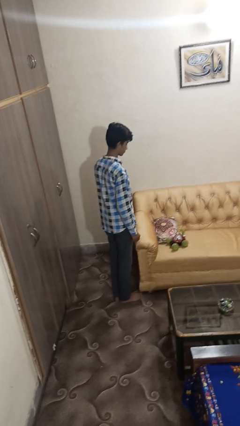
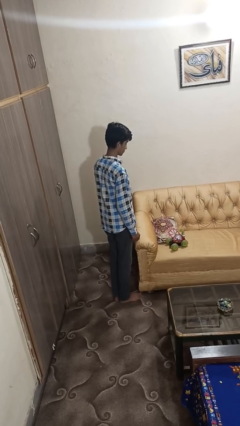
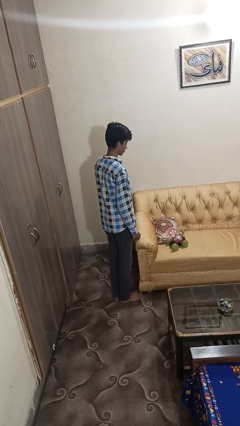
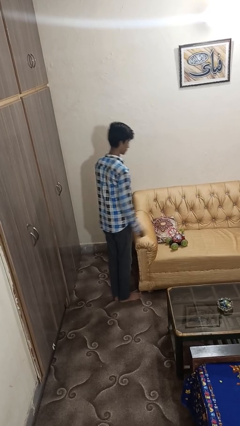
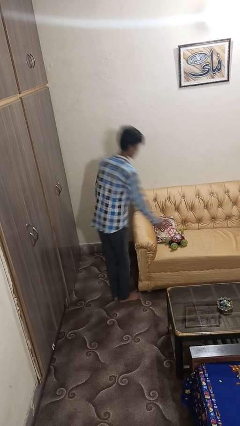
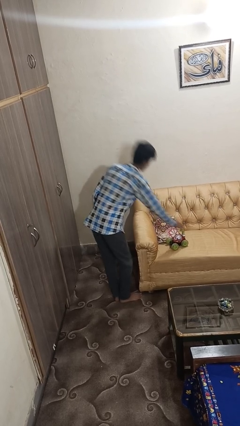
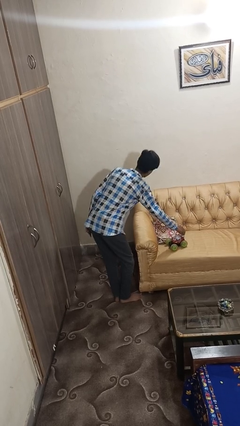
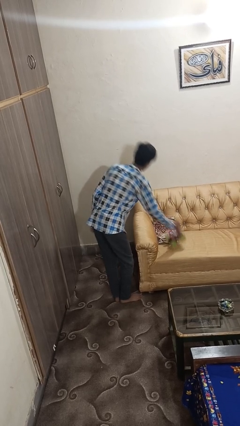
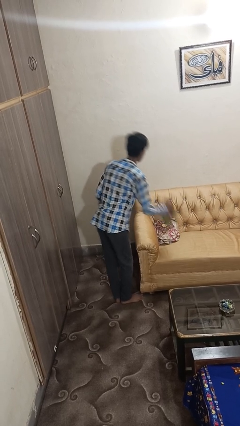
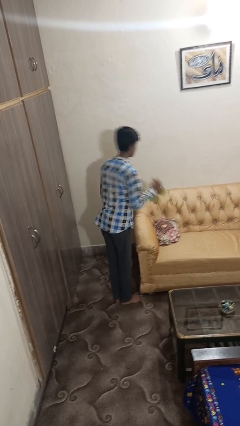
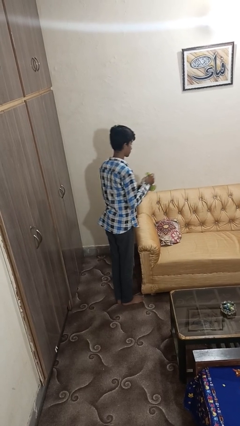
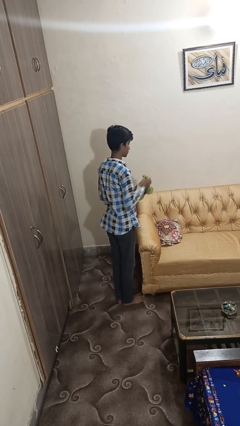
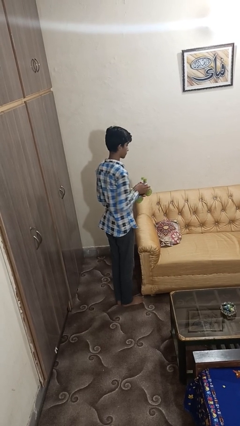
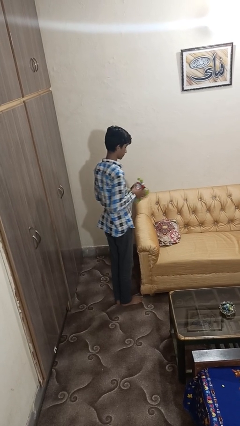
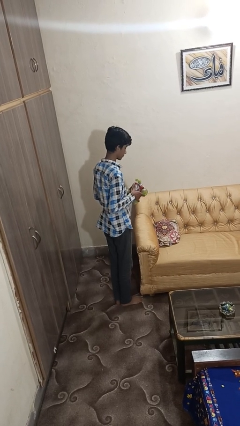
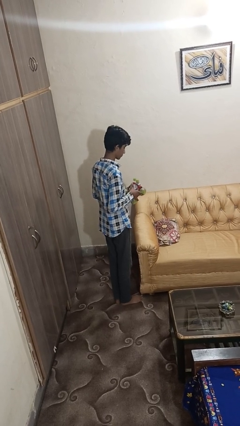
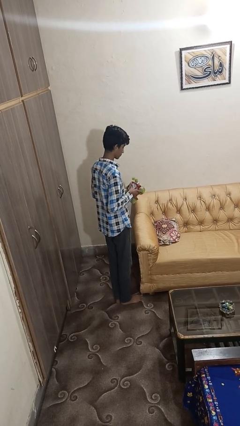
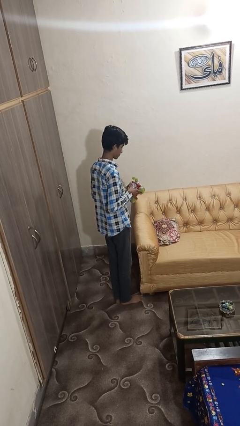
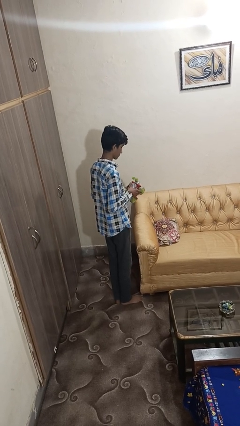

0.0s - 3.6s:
person picks up object from couch

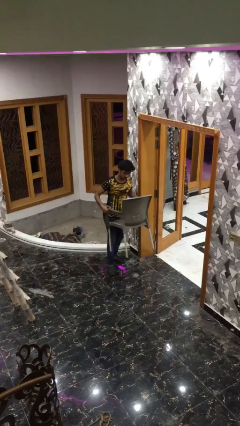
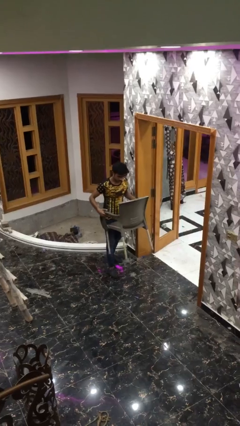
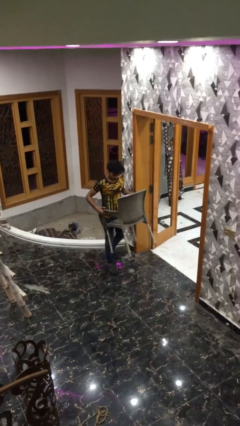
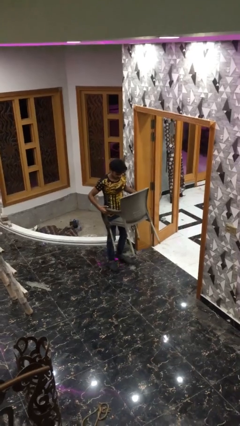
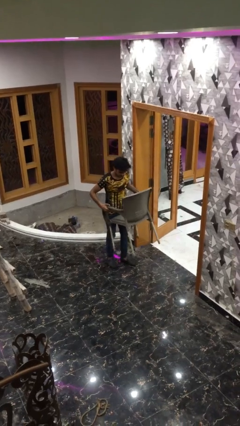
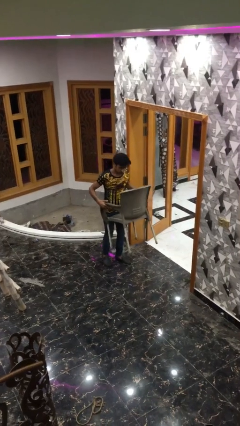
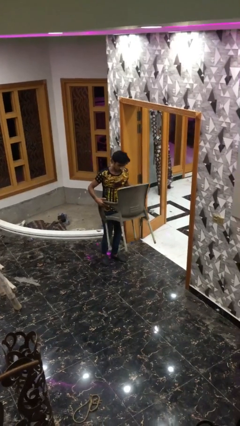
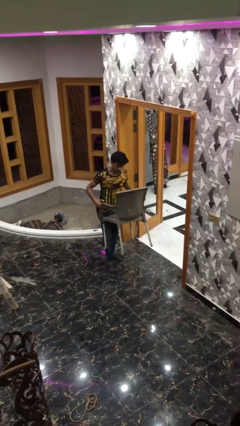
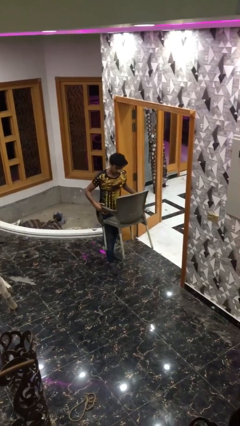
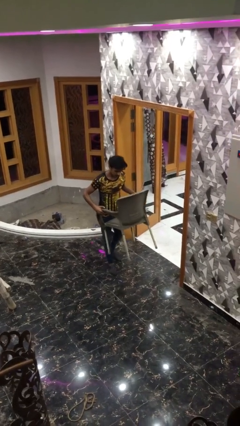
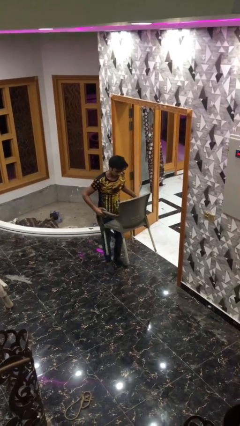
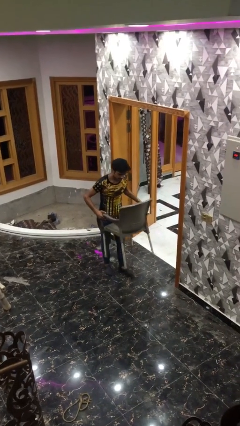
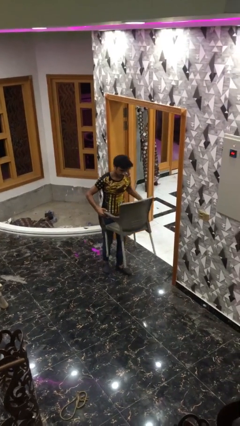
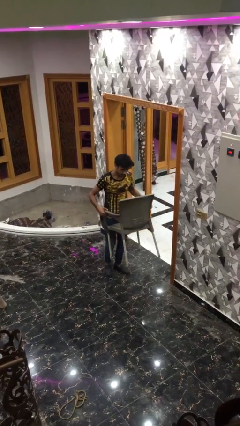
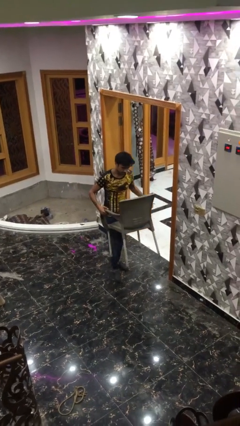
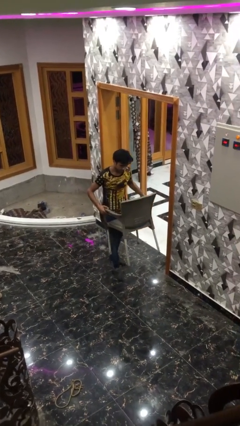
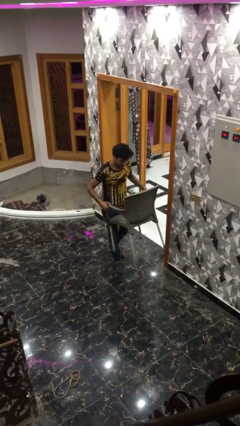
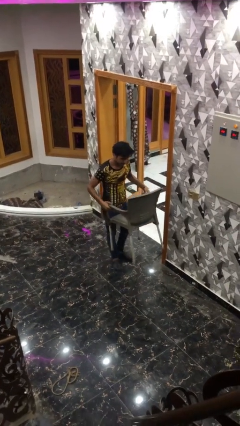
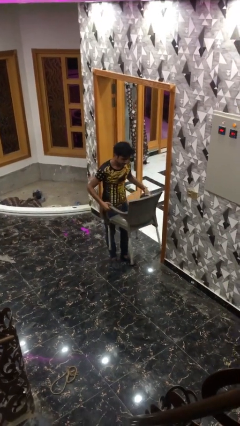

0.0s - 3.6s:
person carries heavy object

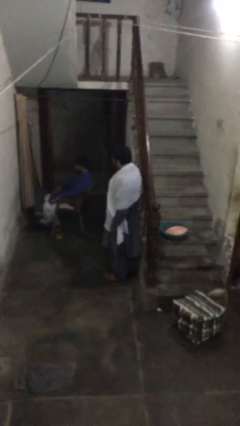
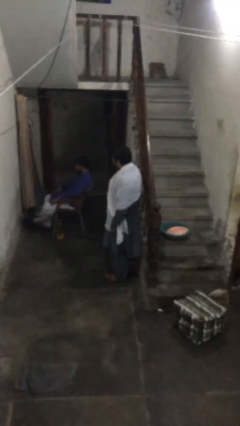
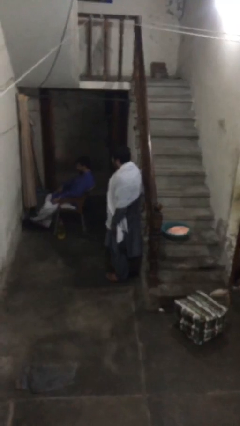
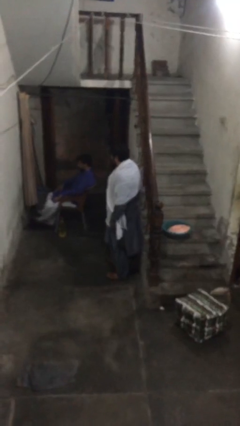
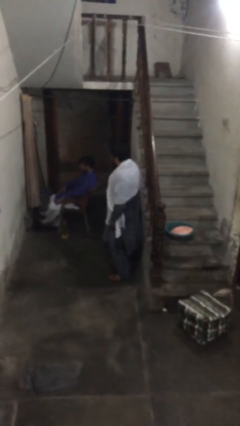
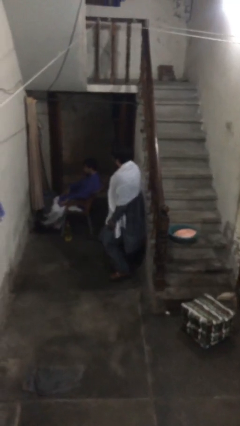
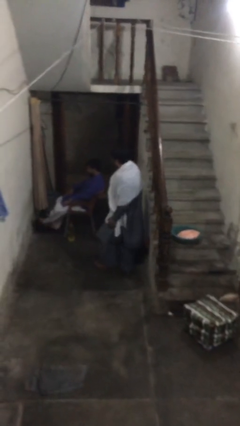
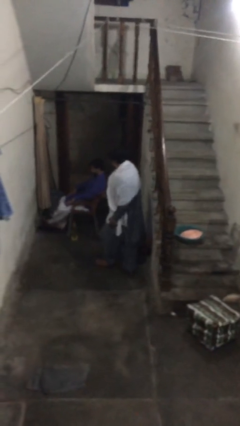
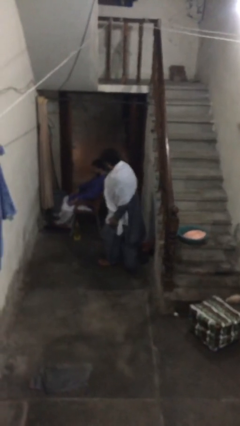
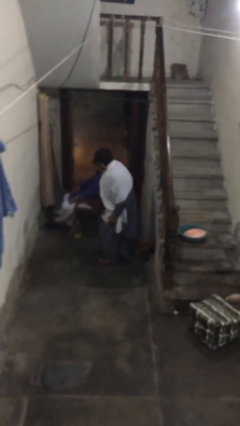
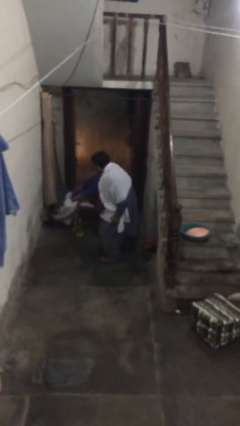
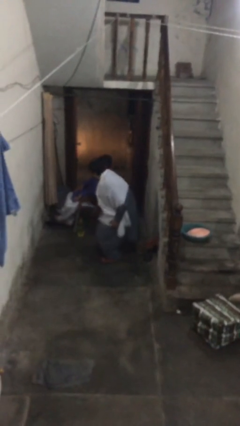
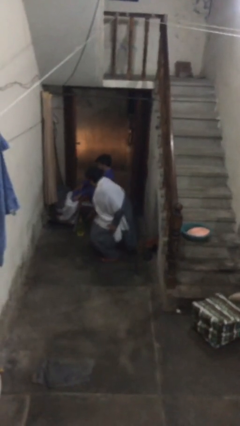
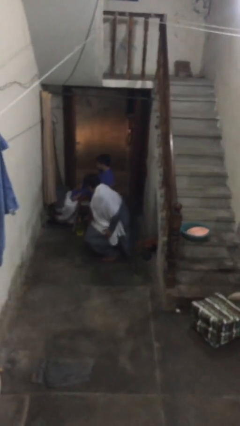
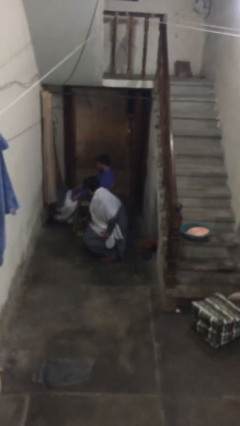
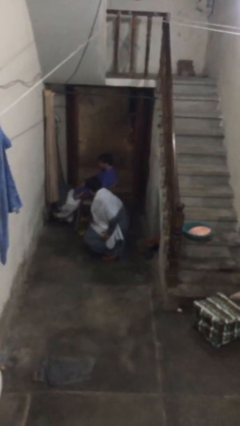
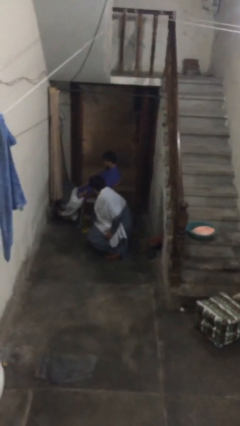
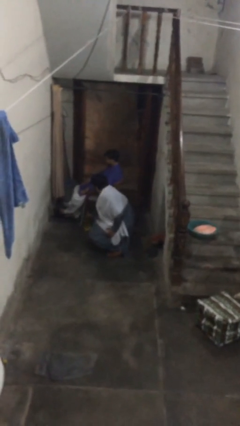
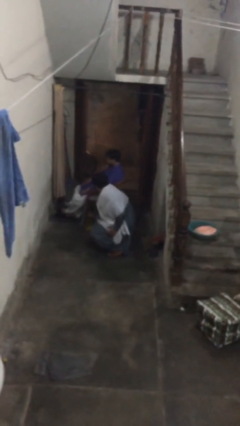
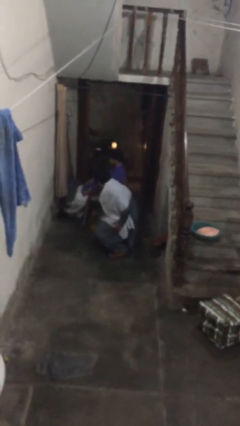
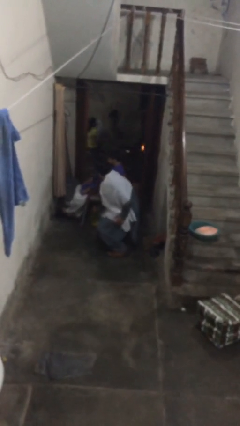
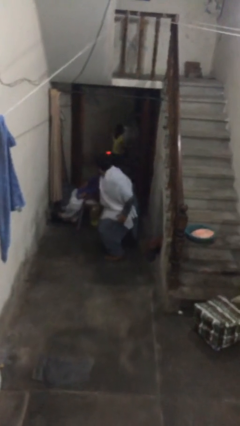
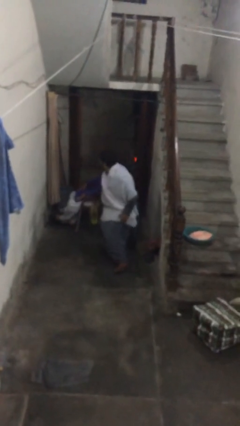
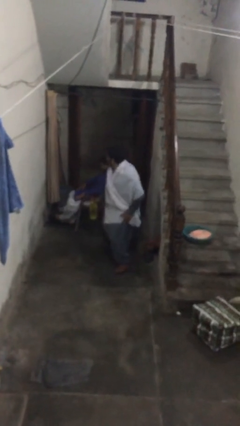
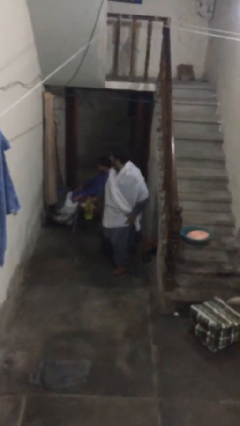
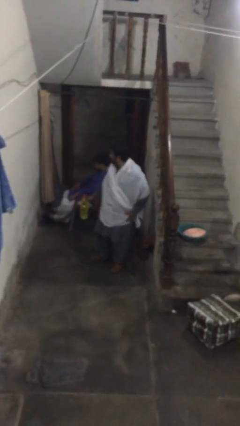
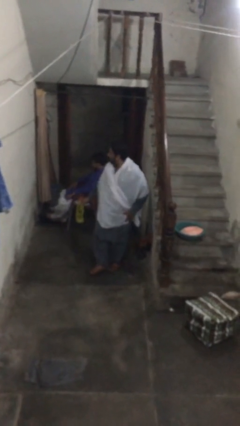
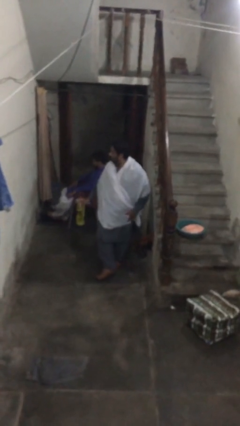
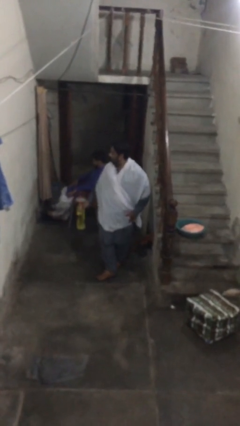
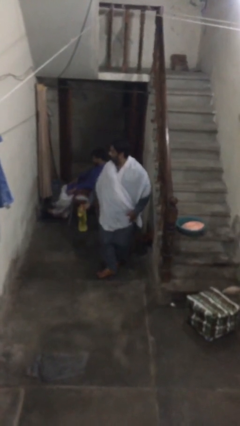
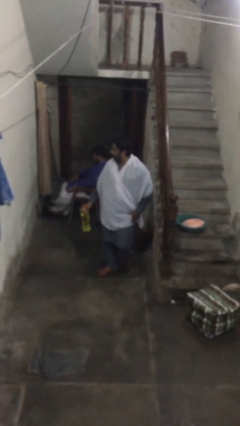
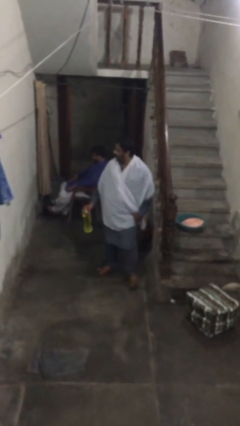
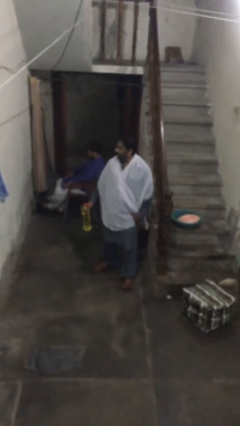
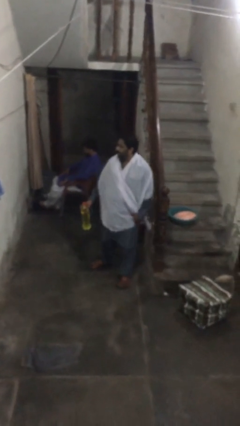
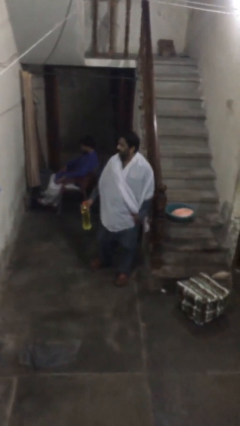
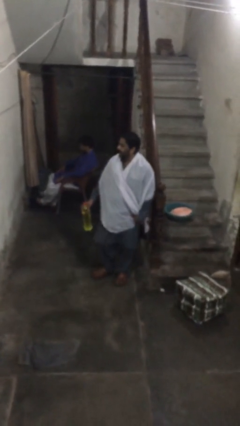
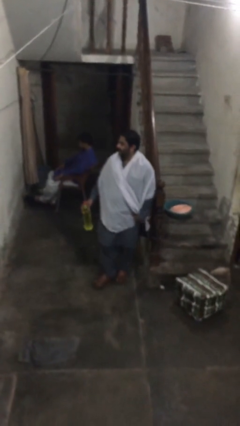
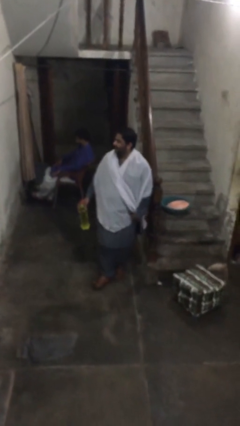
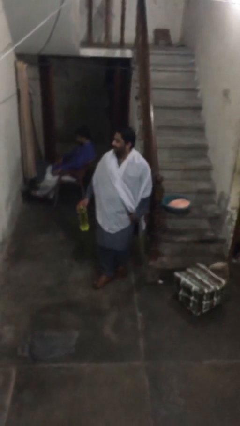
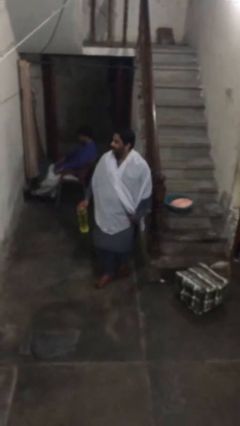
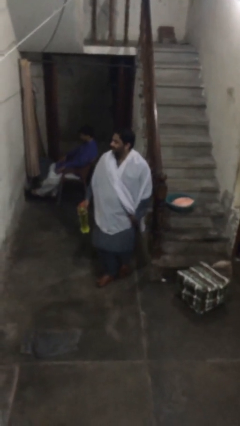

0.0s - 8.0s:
person steals object from person

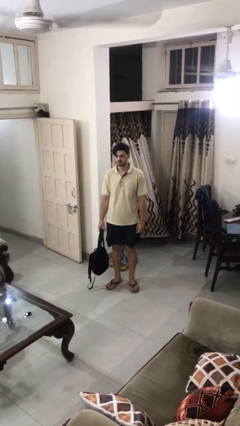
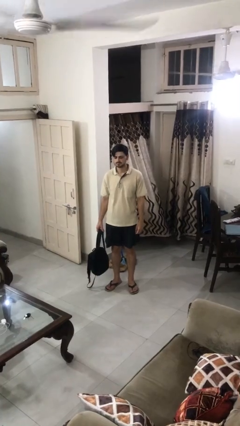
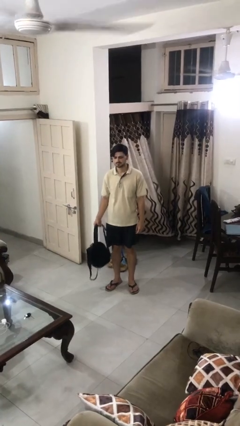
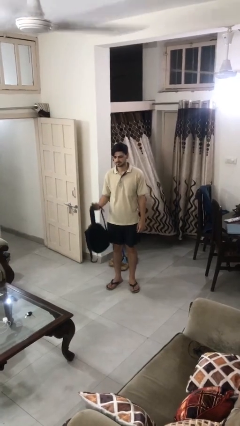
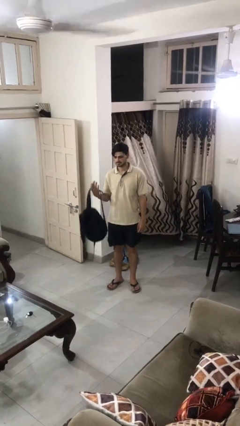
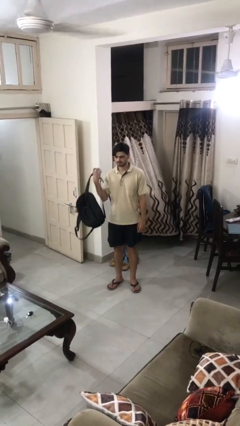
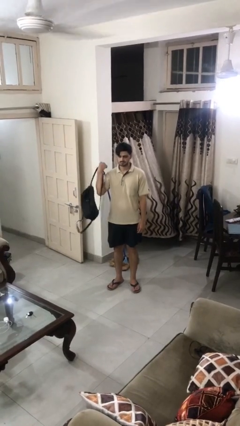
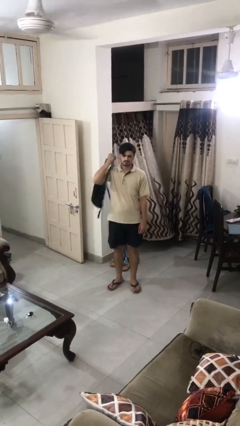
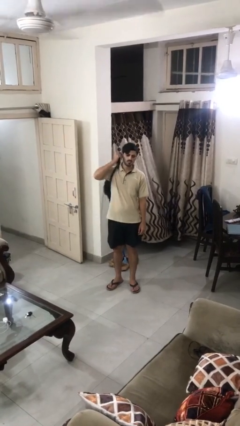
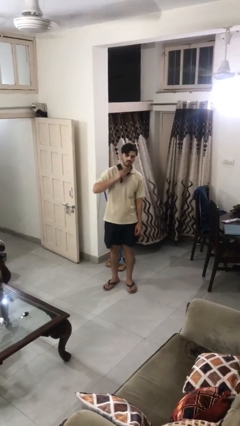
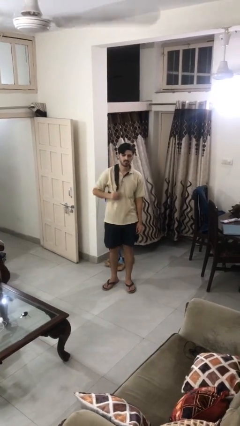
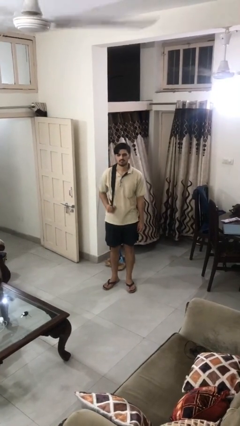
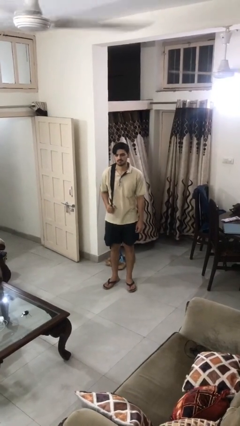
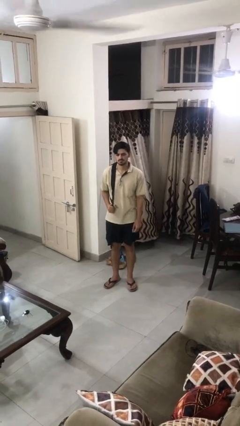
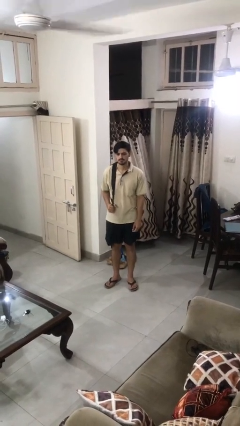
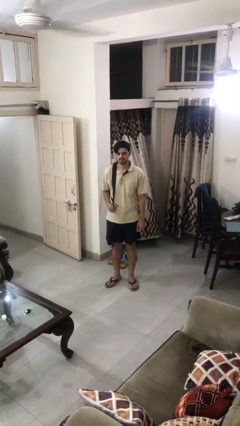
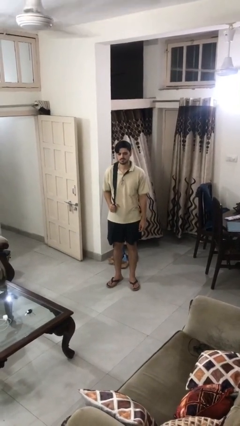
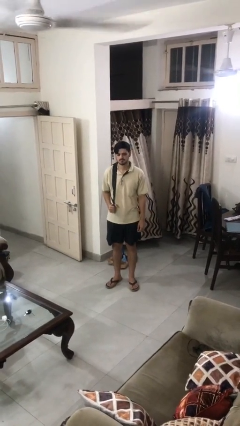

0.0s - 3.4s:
person puts on backpack
